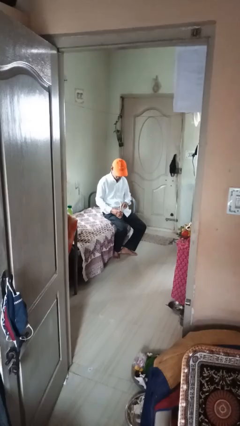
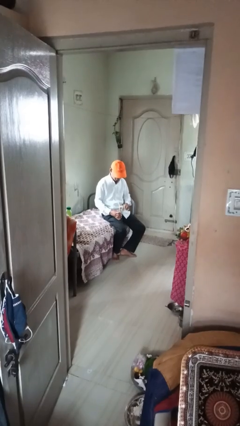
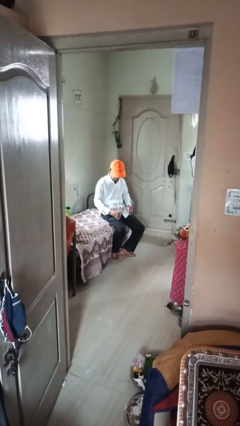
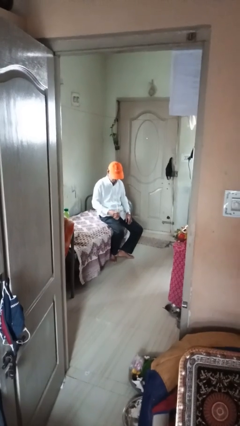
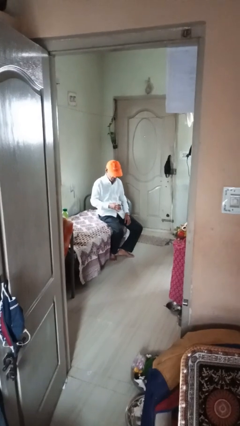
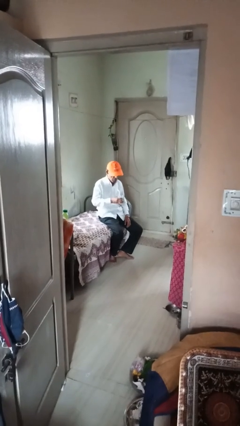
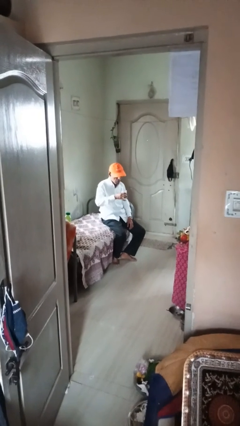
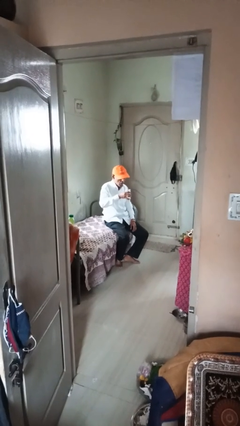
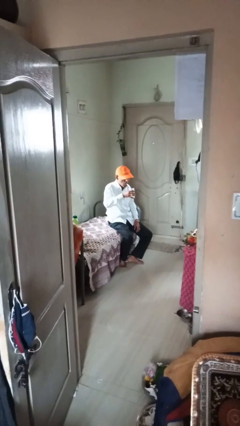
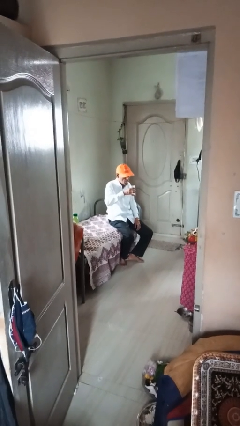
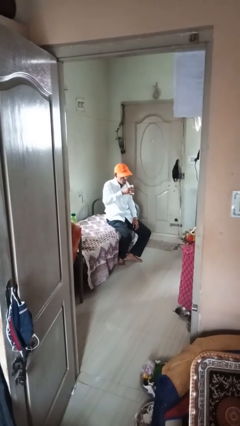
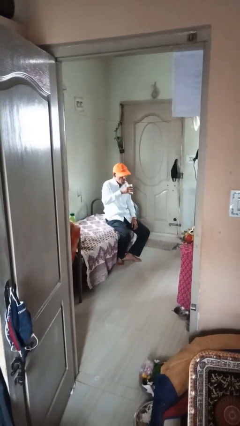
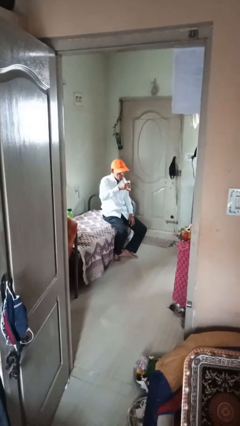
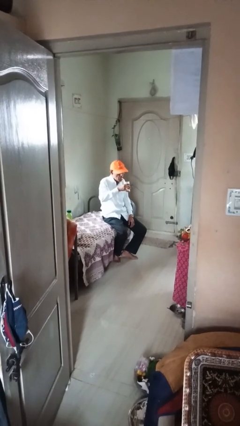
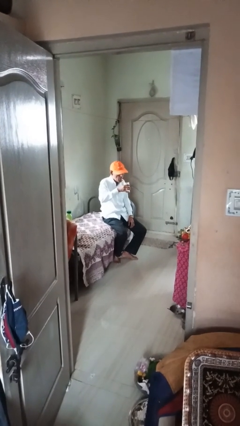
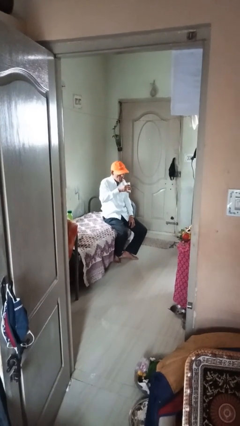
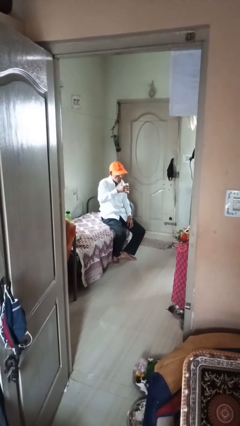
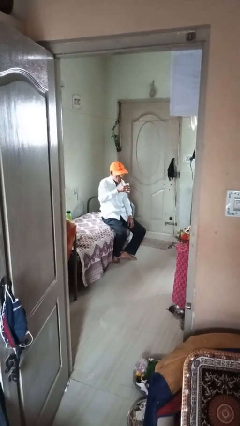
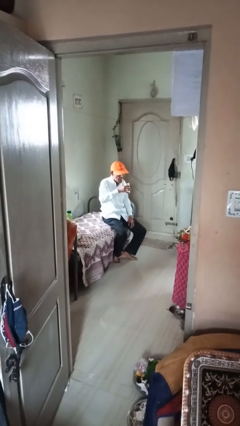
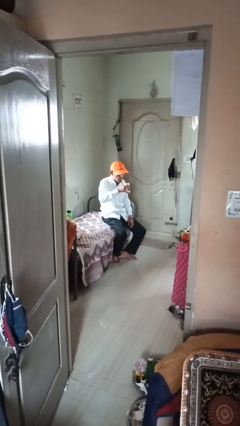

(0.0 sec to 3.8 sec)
person drinks from straw

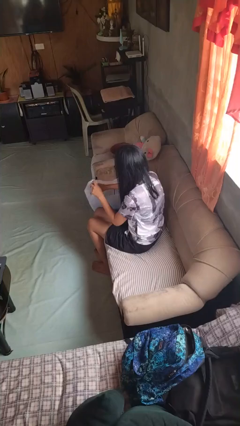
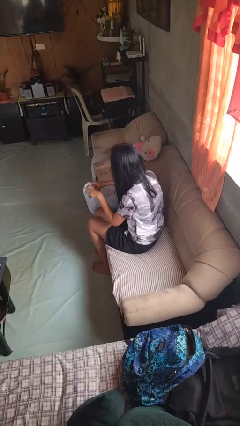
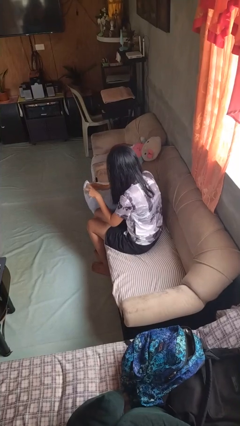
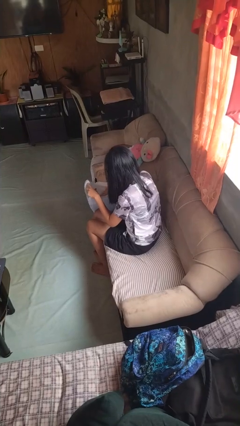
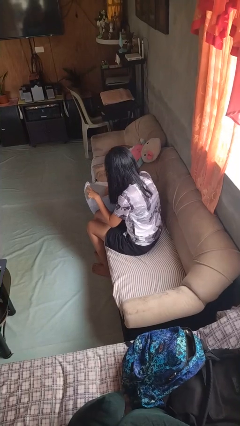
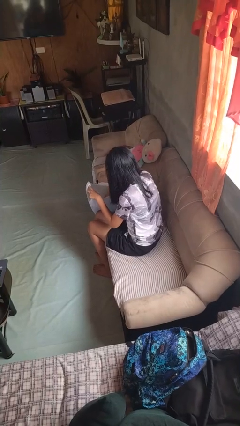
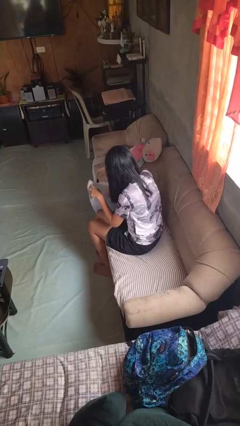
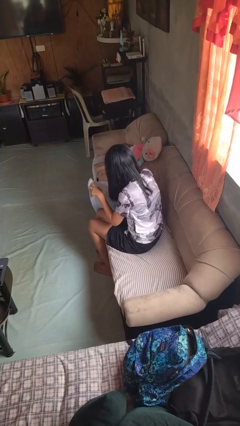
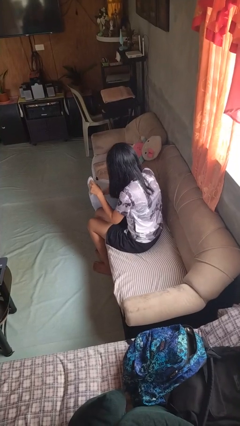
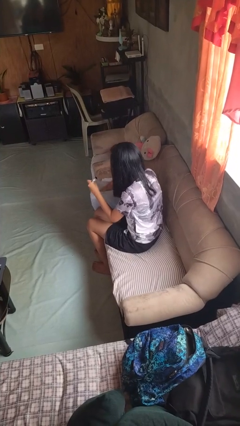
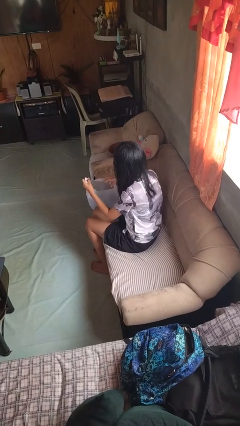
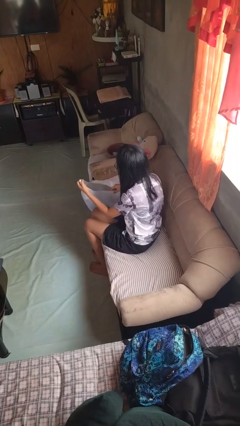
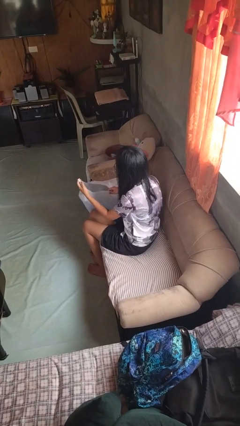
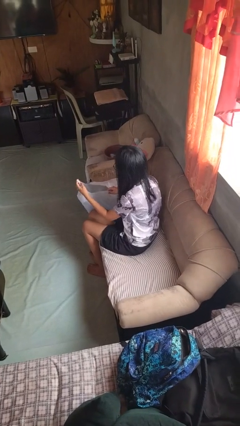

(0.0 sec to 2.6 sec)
person searches in bag

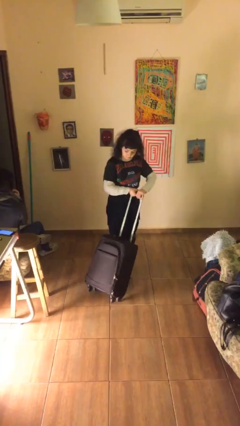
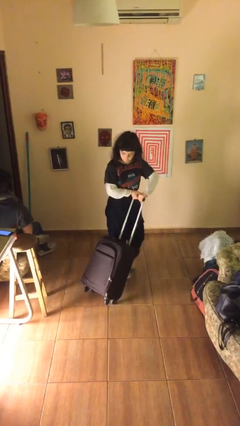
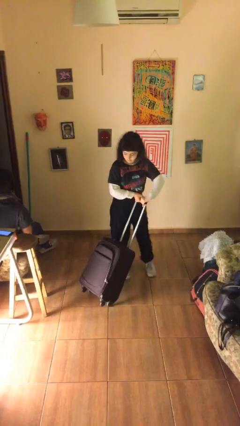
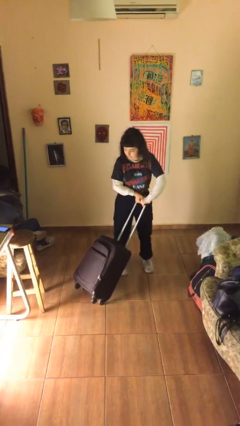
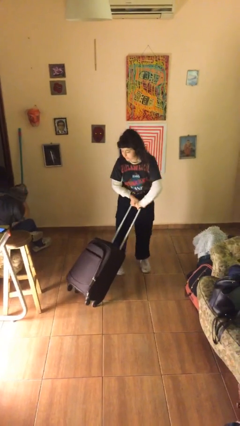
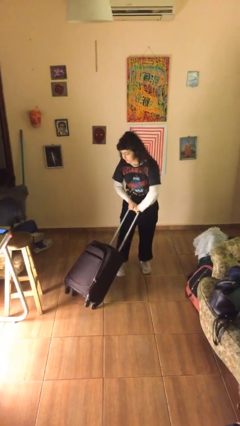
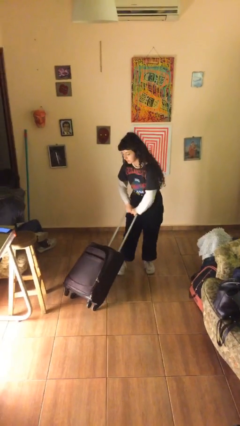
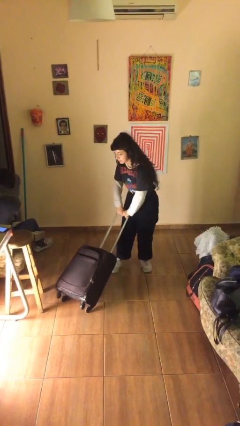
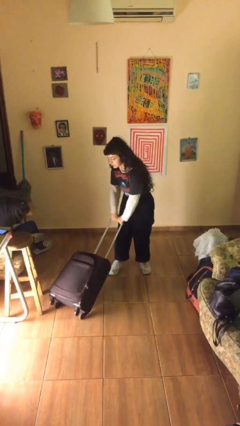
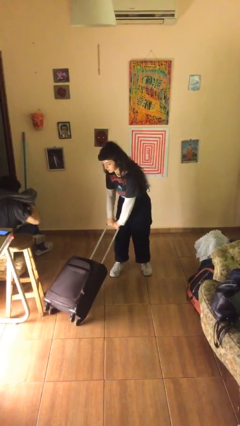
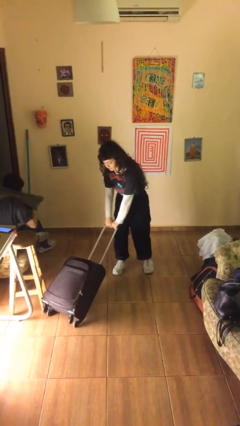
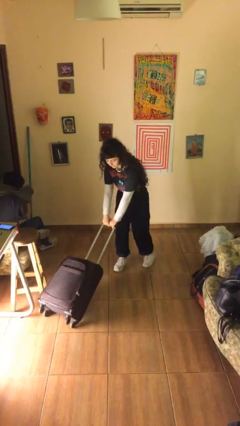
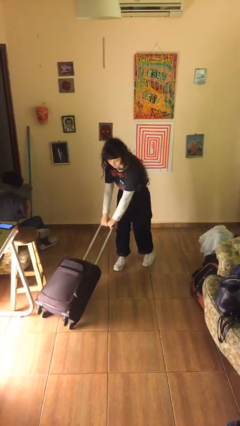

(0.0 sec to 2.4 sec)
person pushes wheeled cart

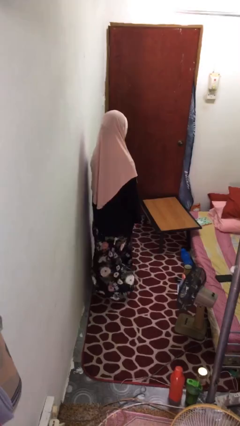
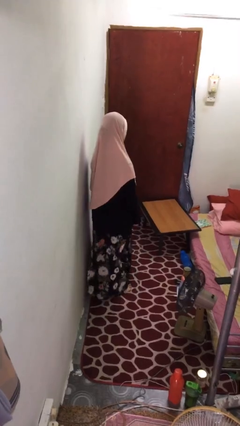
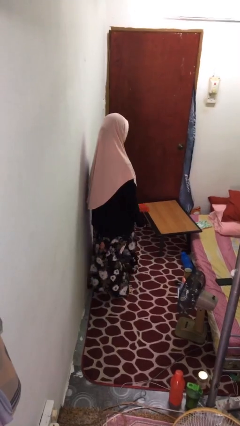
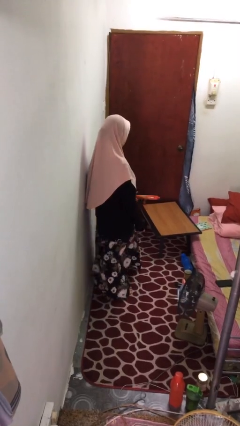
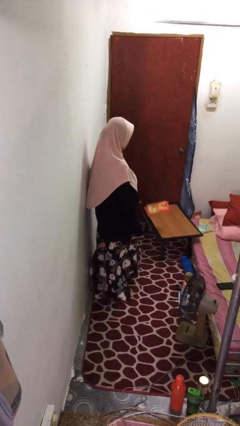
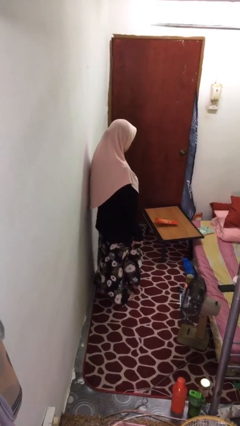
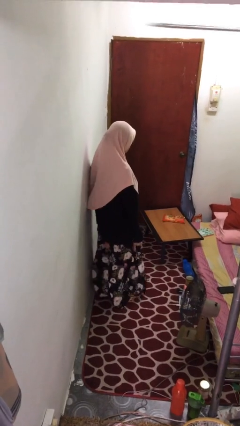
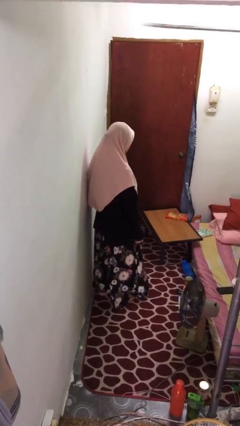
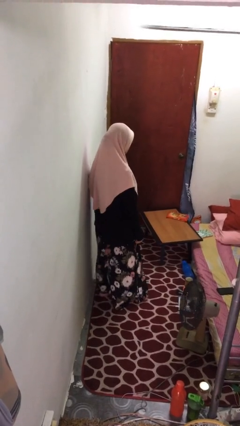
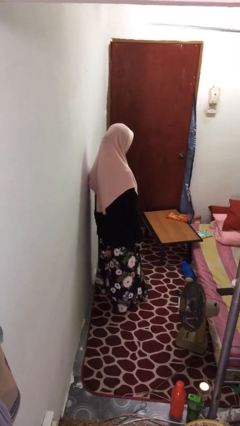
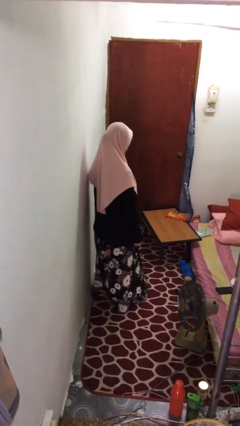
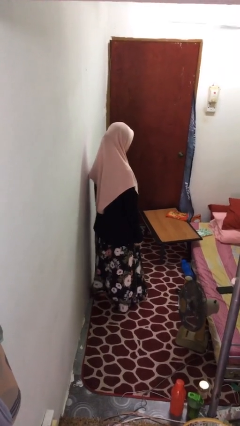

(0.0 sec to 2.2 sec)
person throws object on table

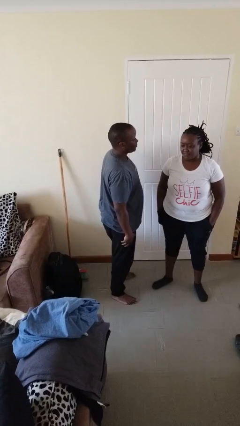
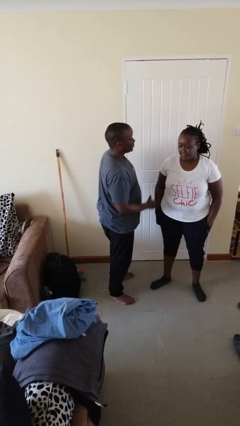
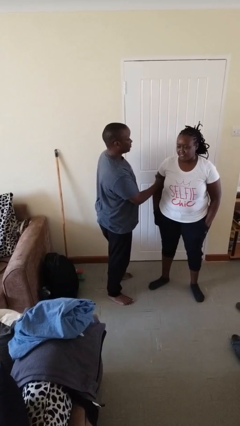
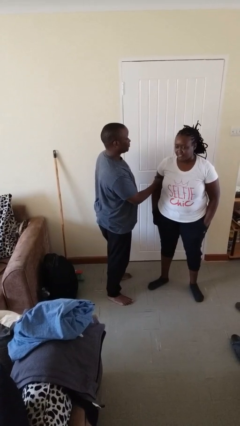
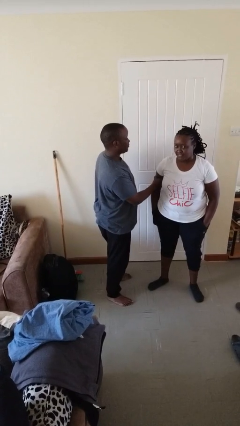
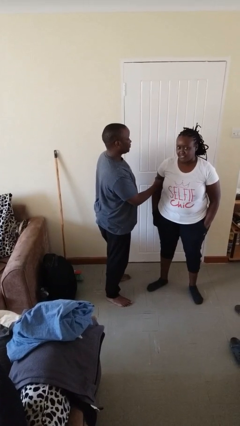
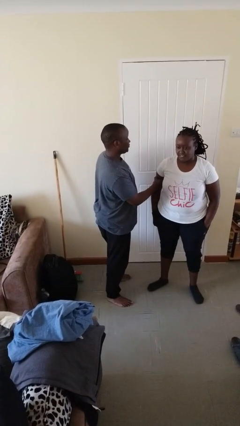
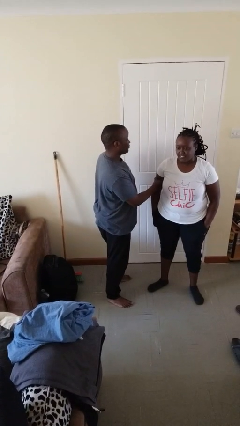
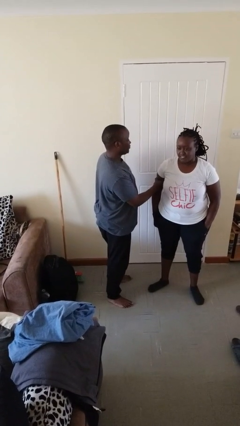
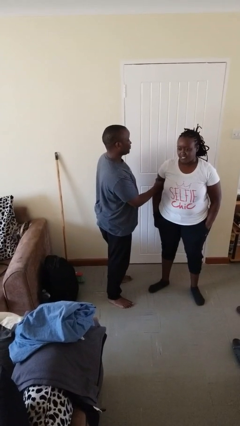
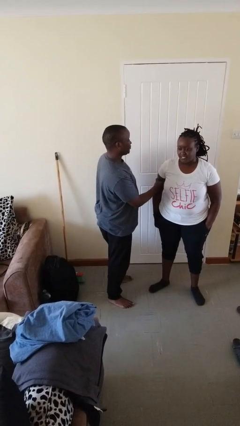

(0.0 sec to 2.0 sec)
person grabs person by bicep

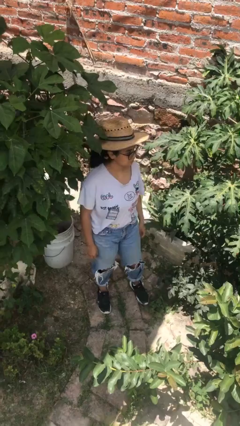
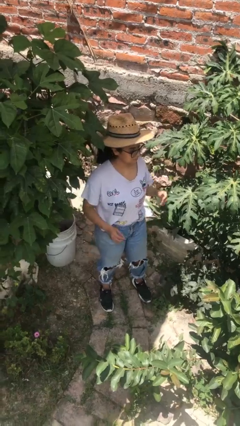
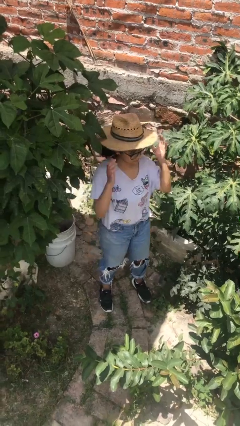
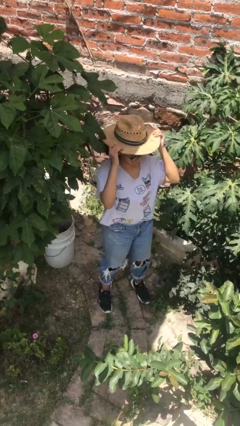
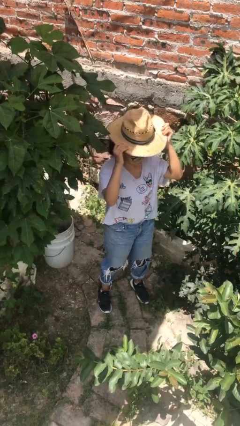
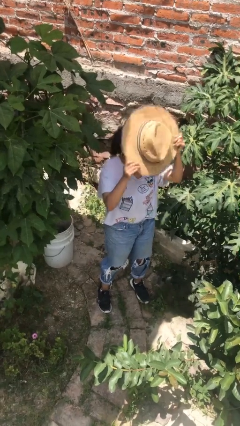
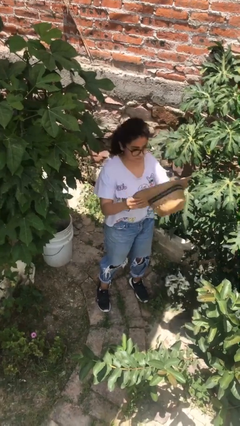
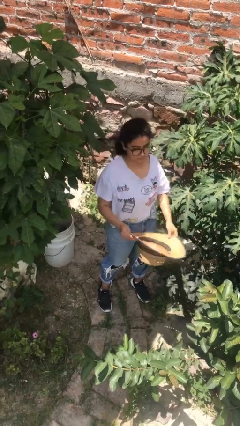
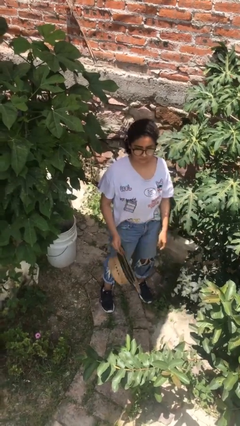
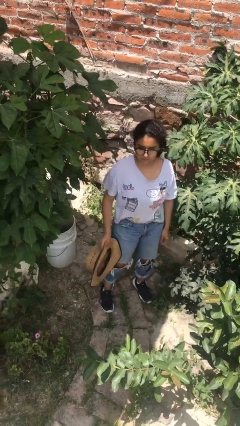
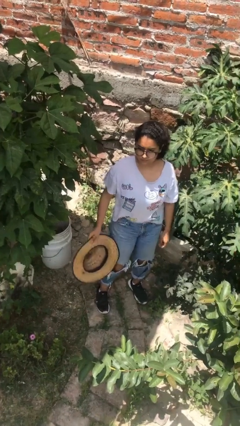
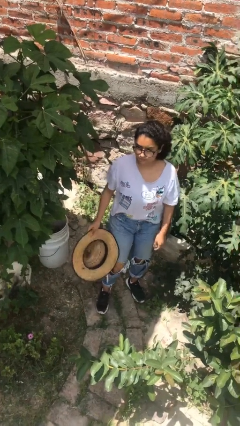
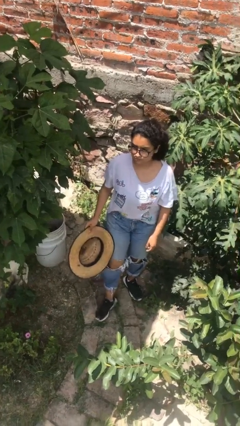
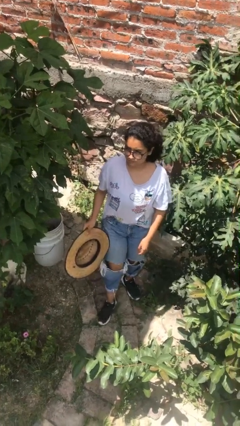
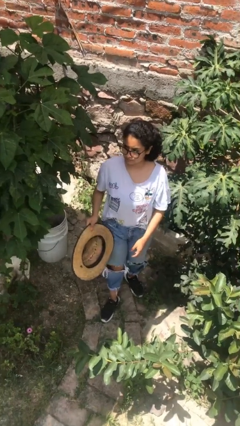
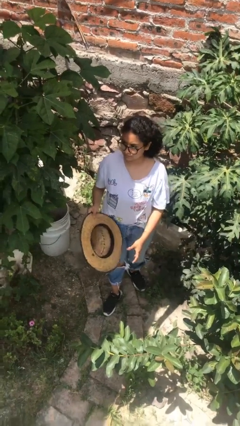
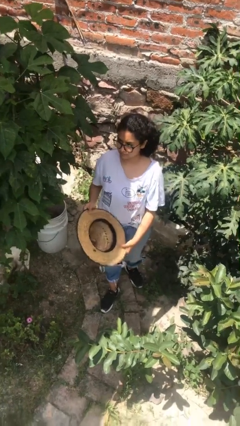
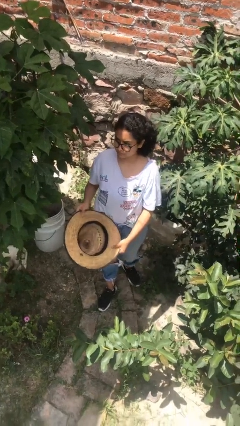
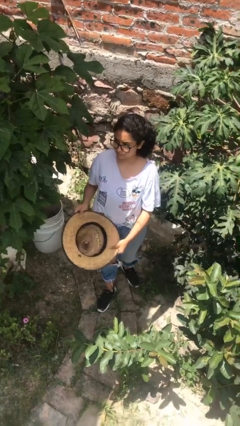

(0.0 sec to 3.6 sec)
person takes off hat

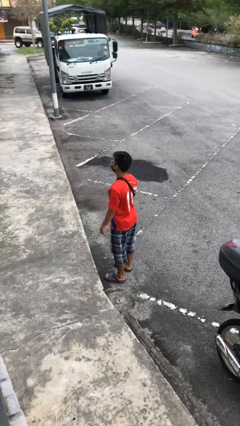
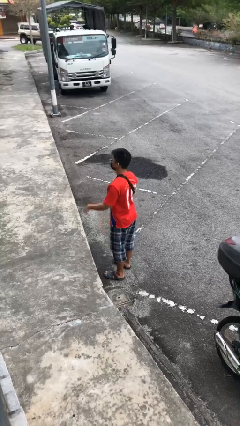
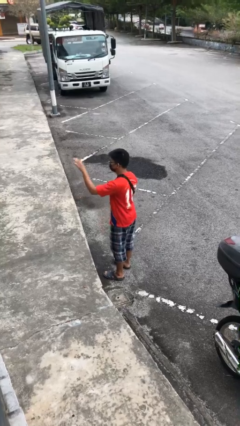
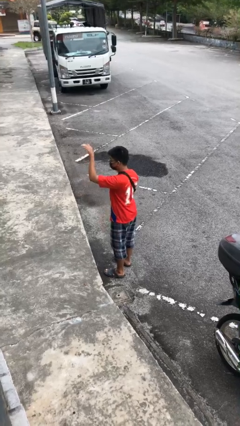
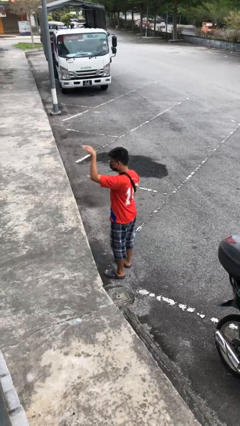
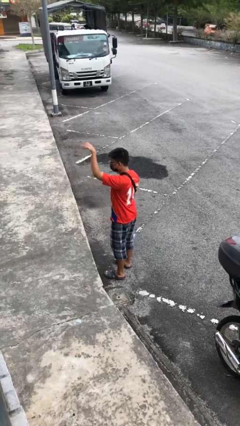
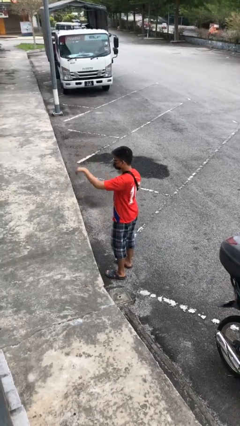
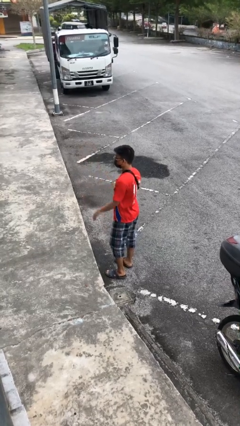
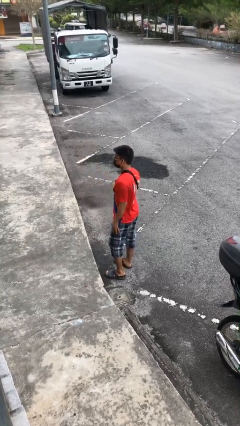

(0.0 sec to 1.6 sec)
person gestures come here
